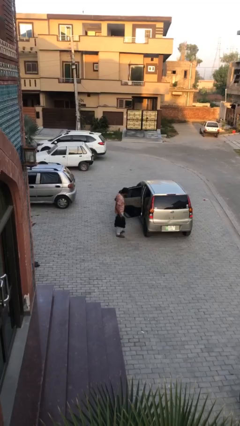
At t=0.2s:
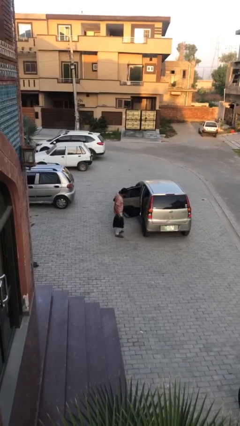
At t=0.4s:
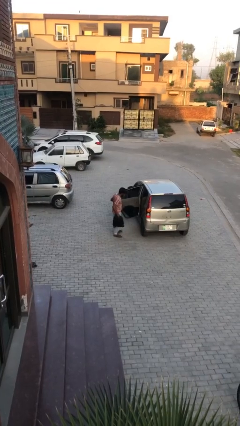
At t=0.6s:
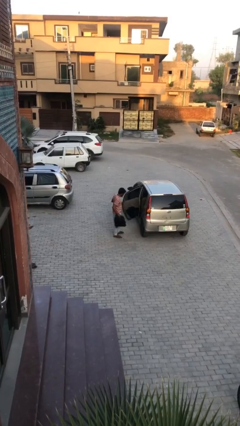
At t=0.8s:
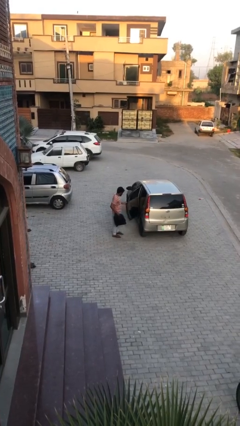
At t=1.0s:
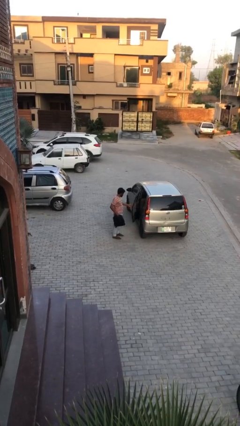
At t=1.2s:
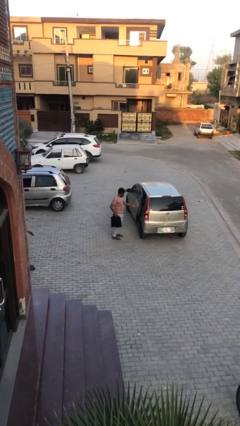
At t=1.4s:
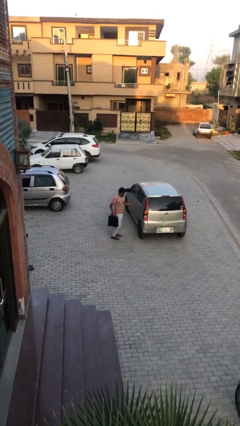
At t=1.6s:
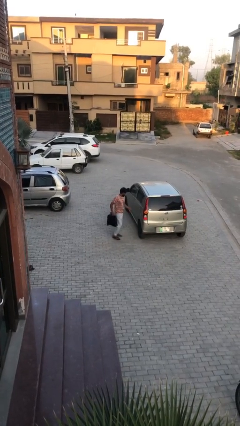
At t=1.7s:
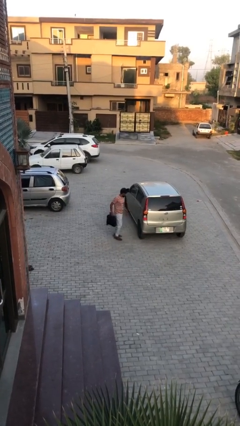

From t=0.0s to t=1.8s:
person closes car door

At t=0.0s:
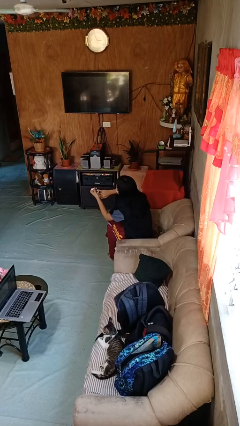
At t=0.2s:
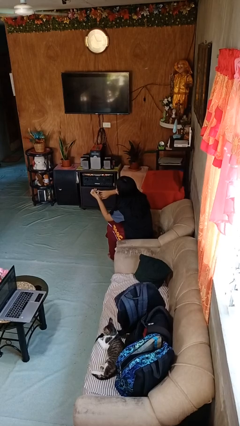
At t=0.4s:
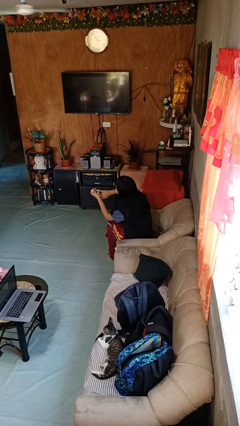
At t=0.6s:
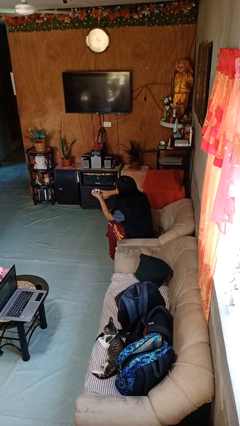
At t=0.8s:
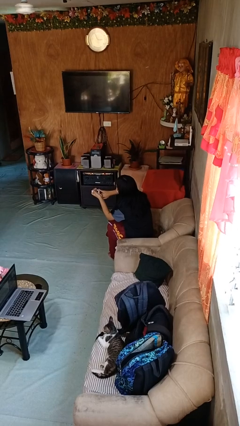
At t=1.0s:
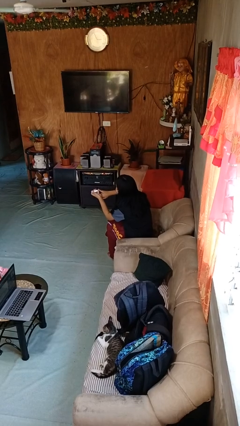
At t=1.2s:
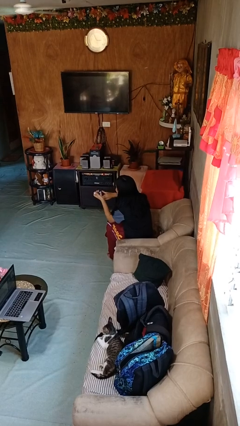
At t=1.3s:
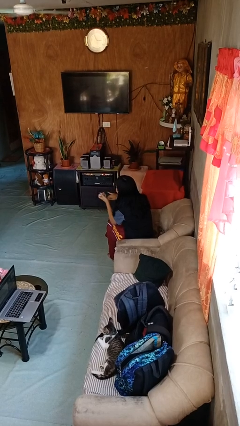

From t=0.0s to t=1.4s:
person clips fingernails

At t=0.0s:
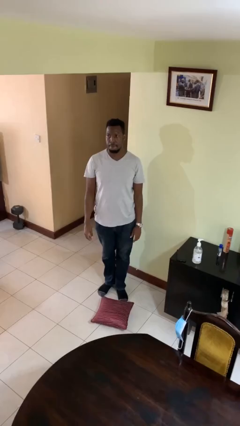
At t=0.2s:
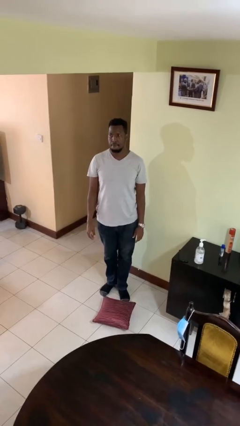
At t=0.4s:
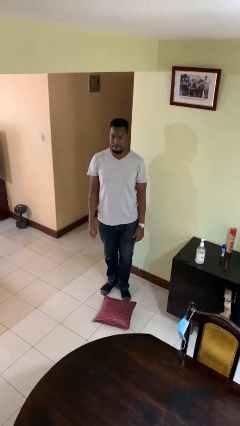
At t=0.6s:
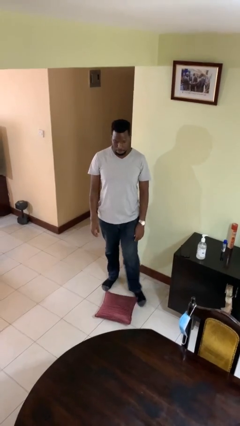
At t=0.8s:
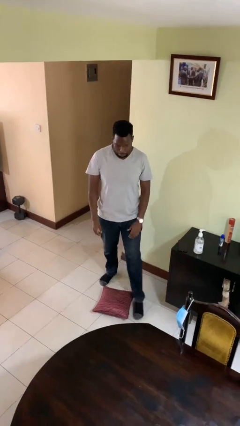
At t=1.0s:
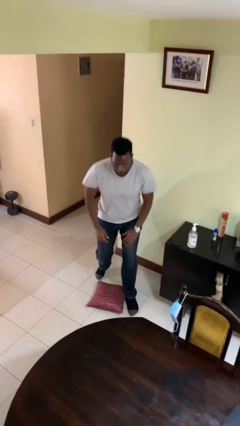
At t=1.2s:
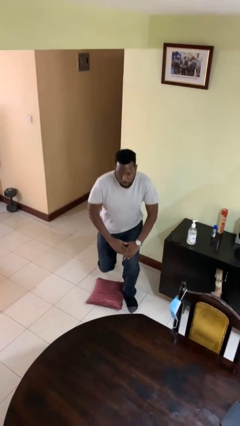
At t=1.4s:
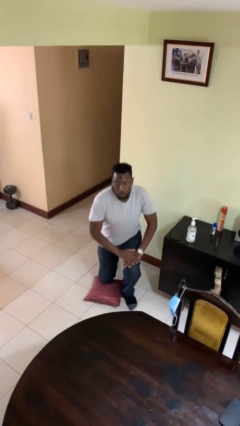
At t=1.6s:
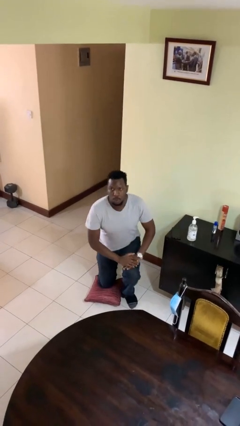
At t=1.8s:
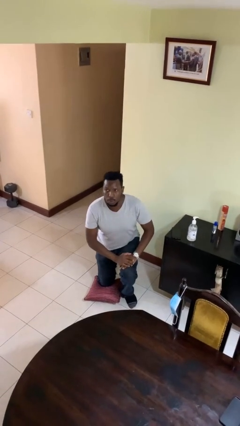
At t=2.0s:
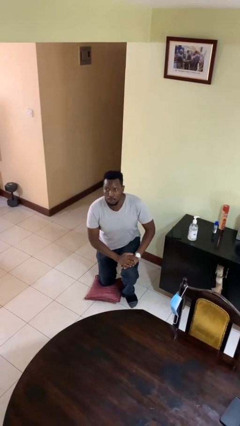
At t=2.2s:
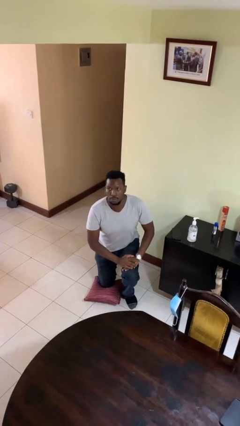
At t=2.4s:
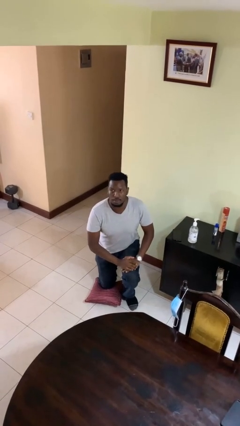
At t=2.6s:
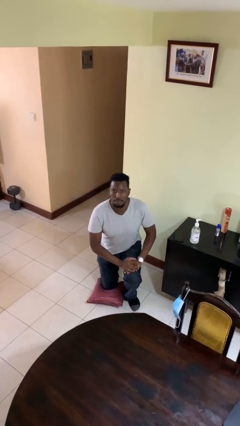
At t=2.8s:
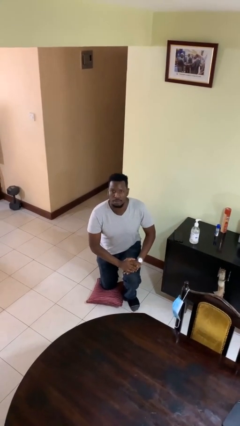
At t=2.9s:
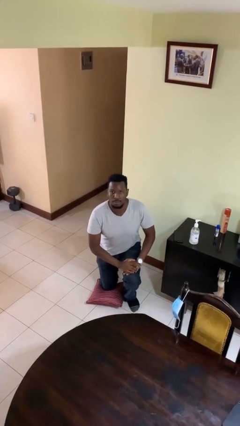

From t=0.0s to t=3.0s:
person kneels

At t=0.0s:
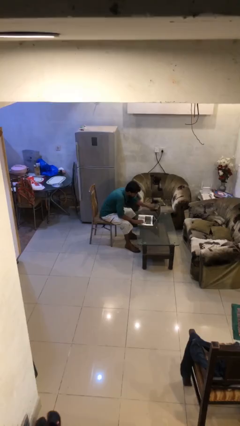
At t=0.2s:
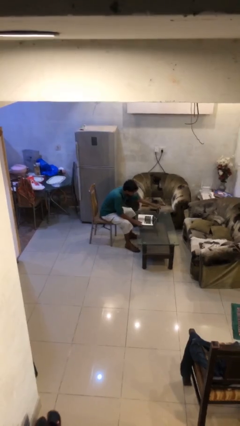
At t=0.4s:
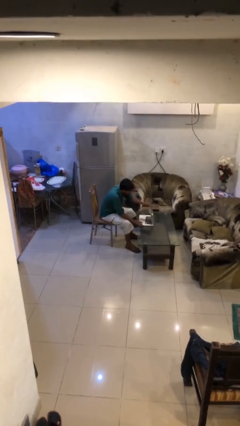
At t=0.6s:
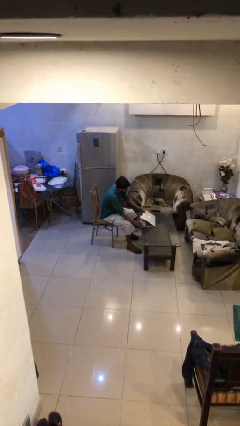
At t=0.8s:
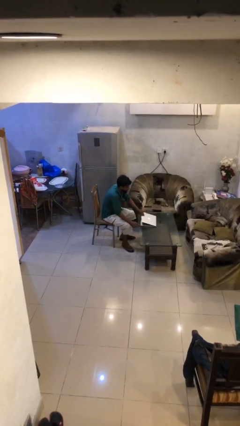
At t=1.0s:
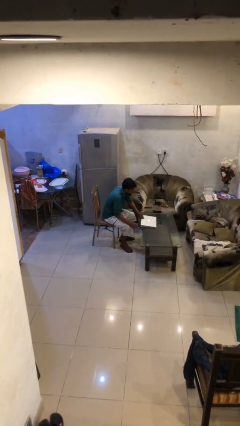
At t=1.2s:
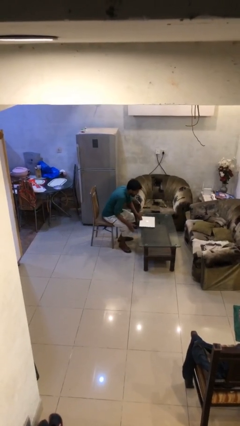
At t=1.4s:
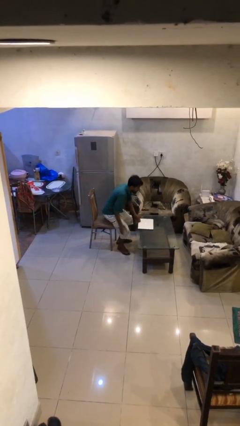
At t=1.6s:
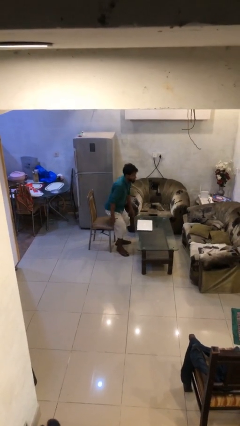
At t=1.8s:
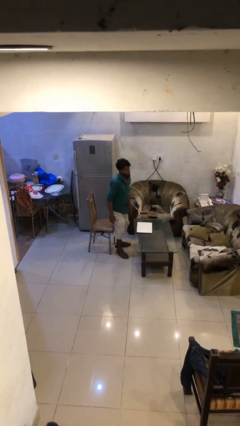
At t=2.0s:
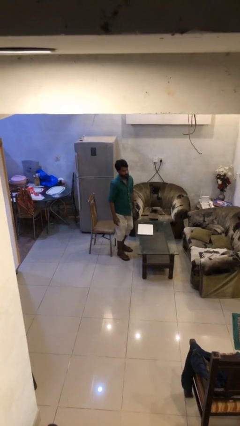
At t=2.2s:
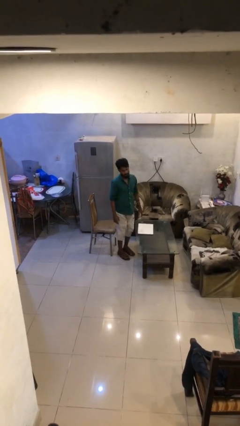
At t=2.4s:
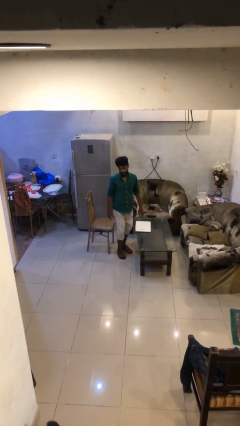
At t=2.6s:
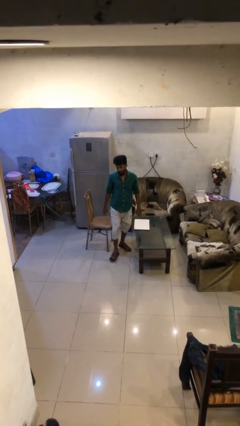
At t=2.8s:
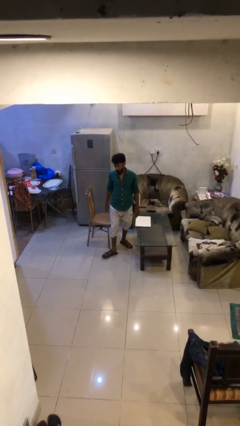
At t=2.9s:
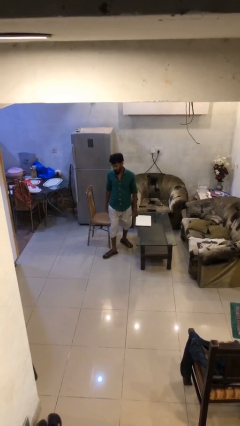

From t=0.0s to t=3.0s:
person stands up

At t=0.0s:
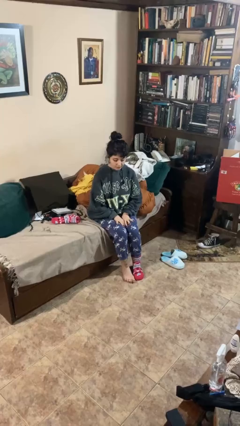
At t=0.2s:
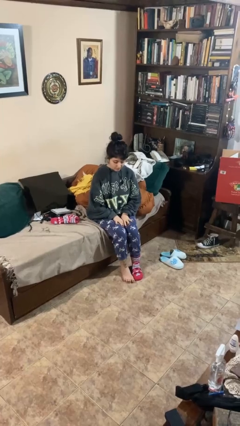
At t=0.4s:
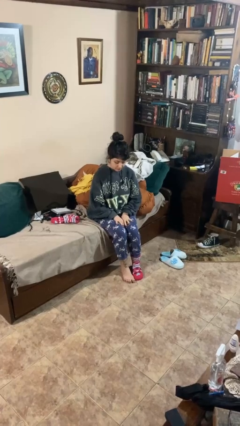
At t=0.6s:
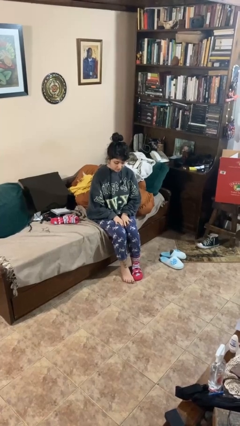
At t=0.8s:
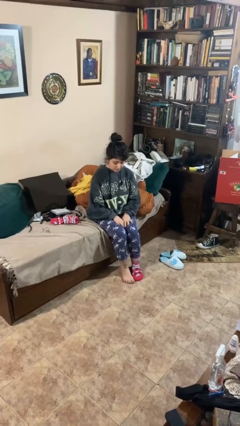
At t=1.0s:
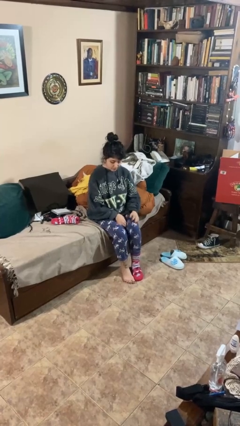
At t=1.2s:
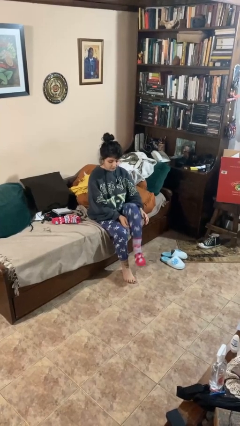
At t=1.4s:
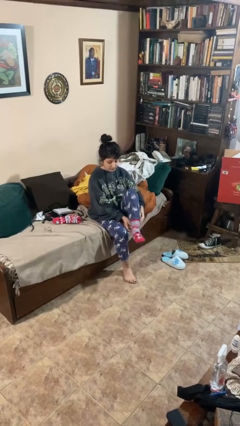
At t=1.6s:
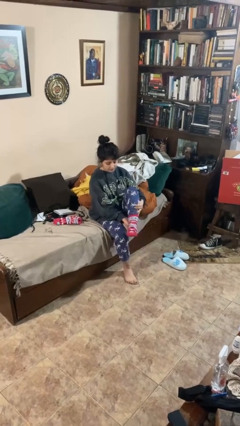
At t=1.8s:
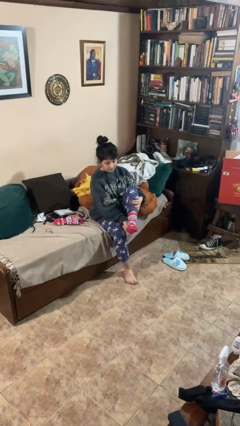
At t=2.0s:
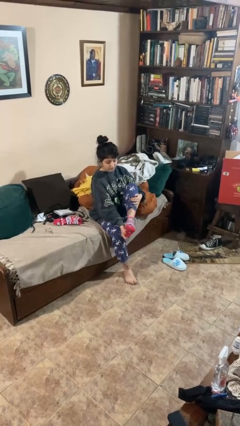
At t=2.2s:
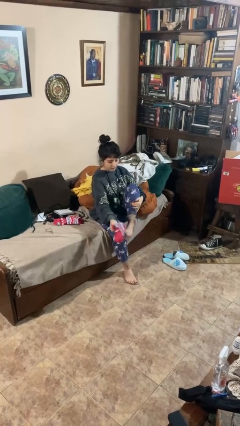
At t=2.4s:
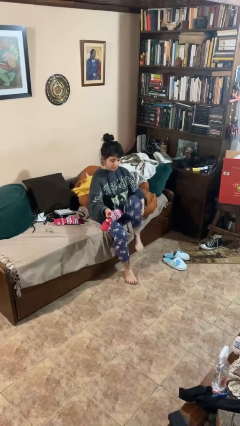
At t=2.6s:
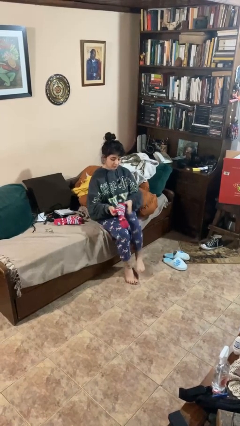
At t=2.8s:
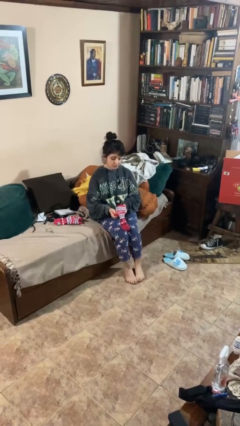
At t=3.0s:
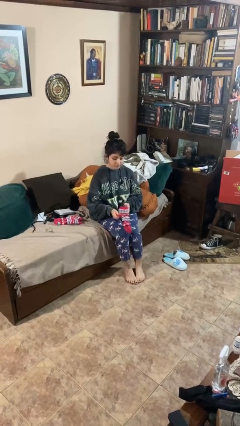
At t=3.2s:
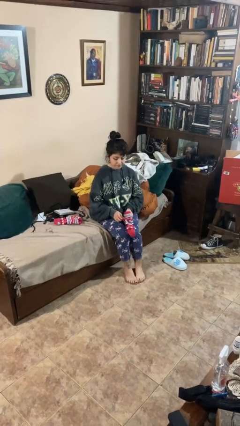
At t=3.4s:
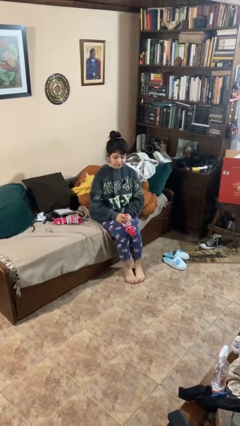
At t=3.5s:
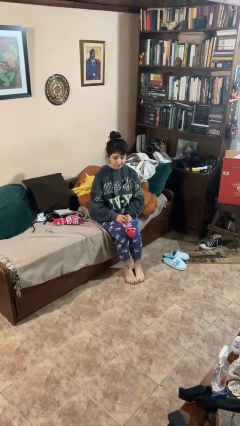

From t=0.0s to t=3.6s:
person takes off socks

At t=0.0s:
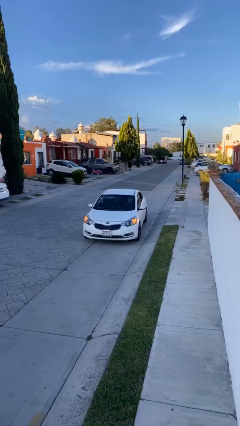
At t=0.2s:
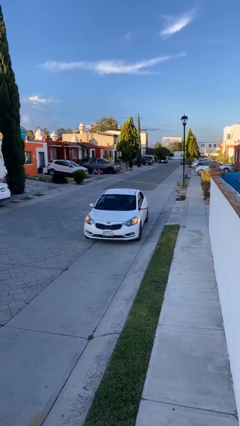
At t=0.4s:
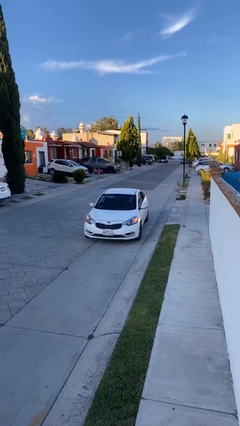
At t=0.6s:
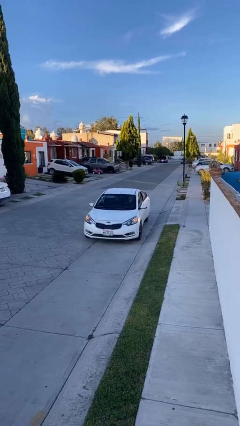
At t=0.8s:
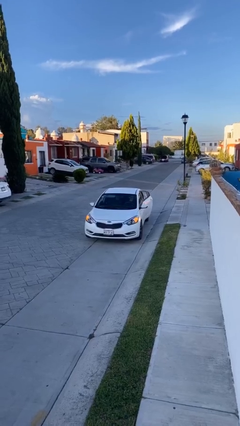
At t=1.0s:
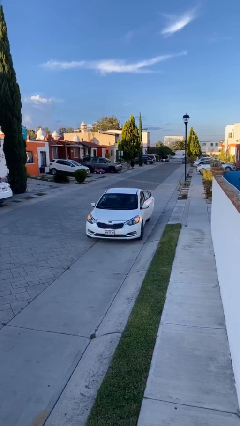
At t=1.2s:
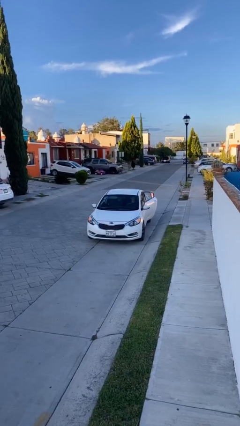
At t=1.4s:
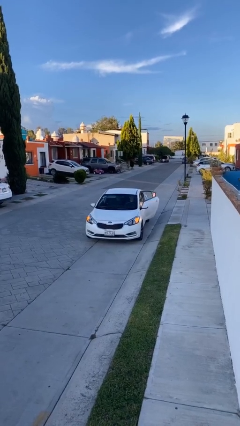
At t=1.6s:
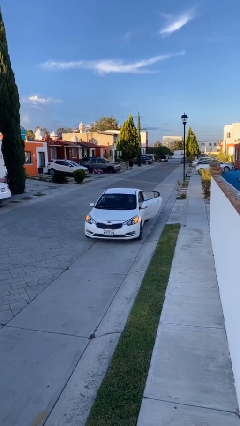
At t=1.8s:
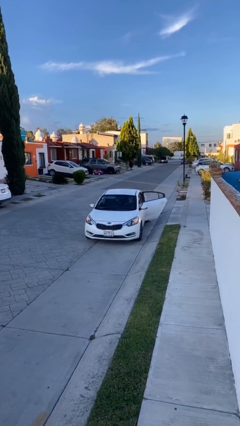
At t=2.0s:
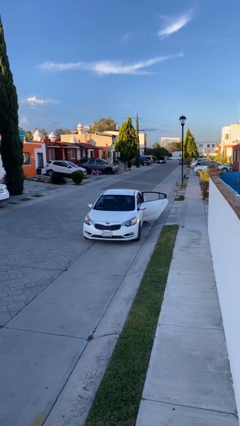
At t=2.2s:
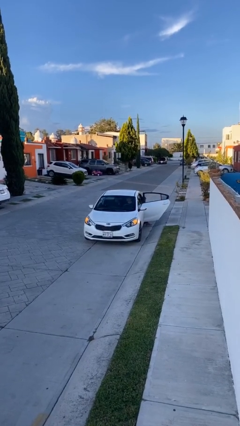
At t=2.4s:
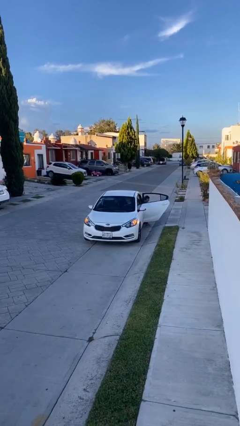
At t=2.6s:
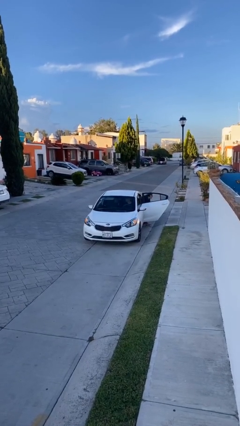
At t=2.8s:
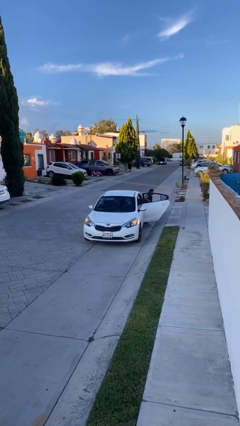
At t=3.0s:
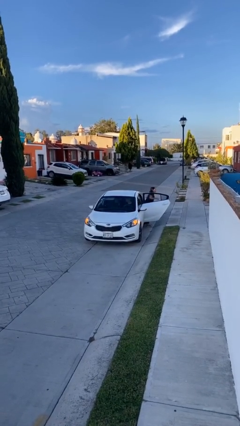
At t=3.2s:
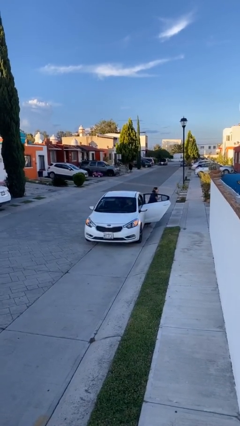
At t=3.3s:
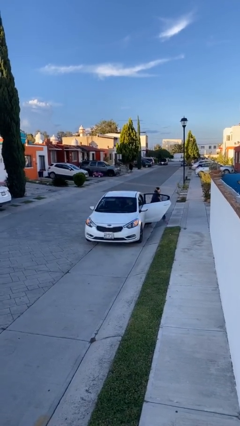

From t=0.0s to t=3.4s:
car drops off person

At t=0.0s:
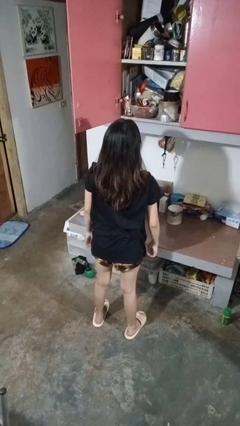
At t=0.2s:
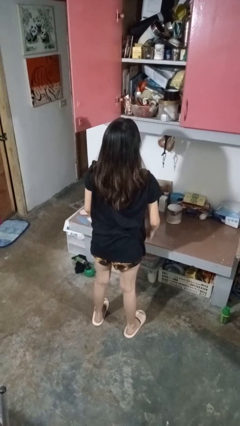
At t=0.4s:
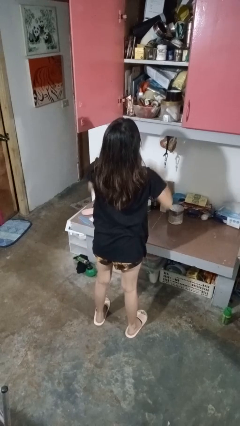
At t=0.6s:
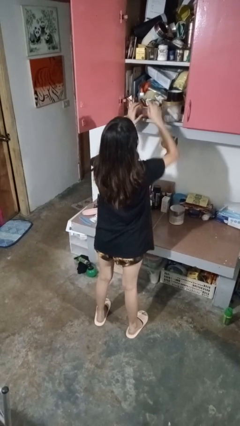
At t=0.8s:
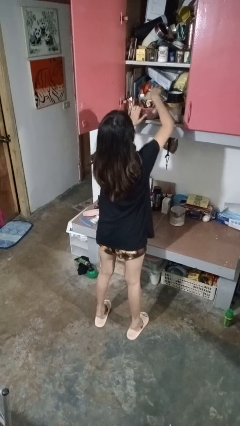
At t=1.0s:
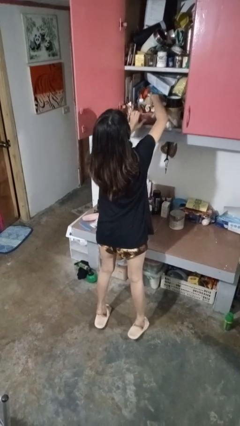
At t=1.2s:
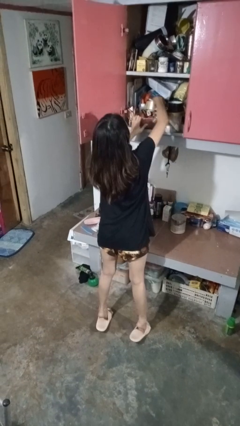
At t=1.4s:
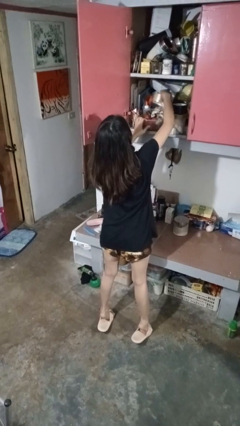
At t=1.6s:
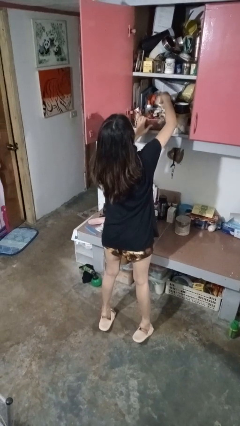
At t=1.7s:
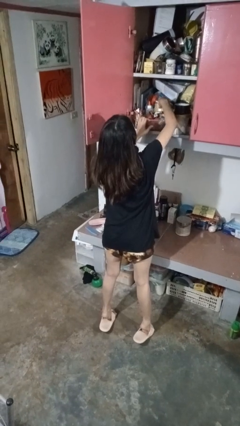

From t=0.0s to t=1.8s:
person searches in cabinet
